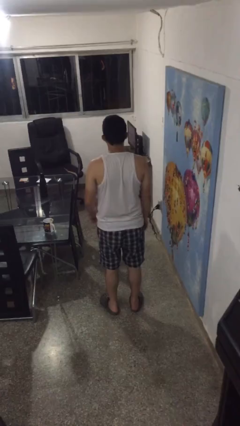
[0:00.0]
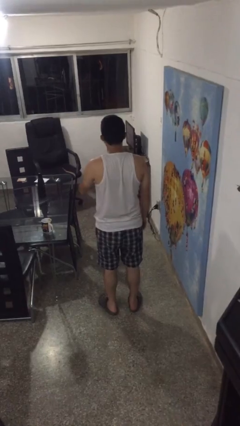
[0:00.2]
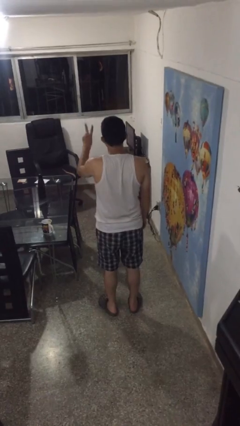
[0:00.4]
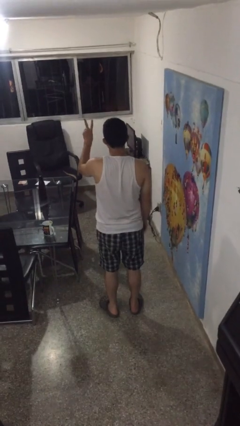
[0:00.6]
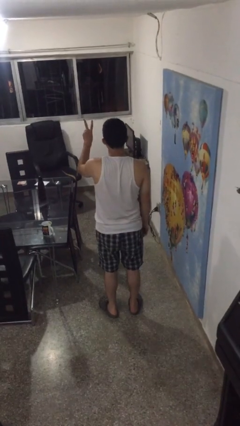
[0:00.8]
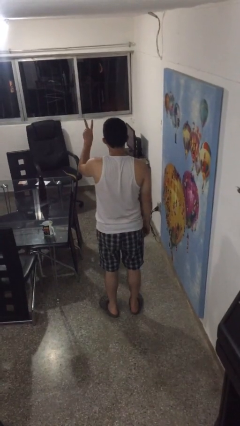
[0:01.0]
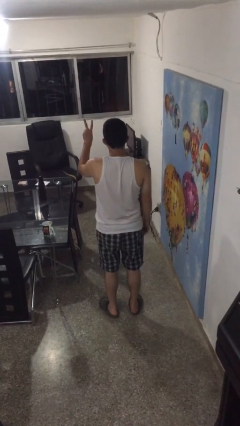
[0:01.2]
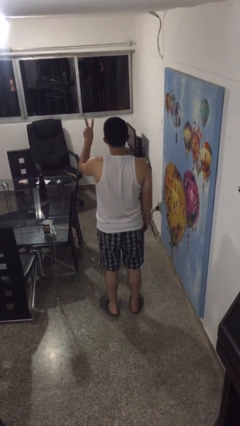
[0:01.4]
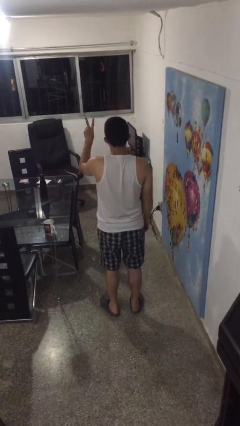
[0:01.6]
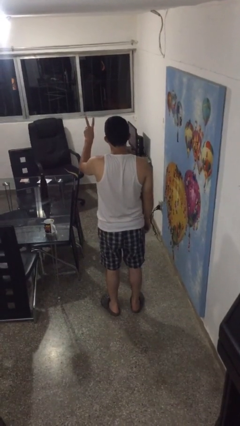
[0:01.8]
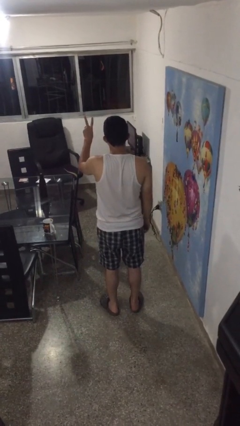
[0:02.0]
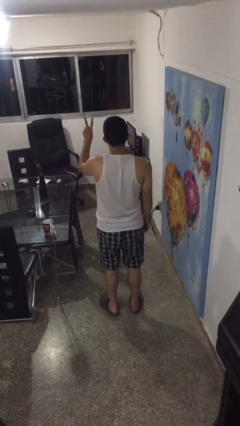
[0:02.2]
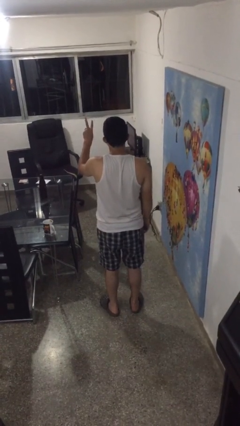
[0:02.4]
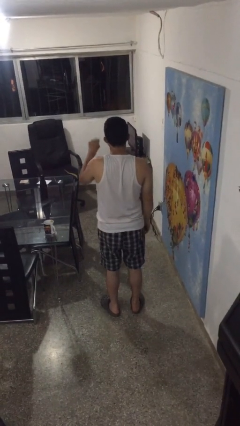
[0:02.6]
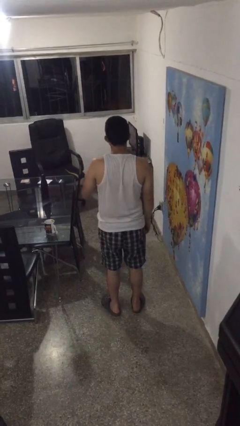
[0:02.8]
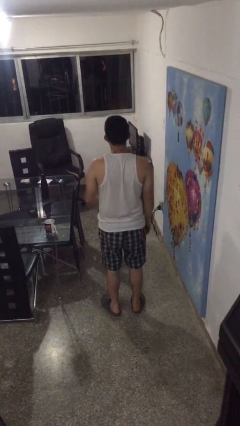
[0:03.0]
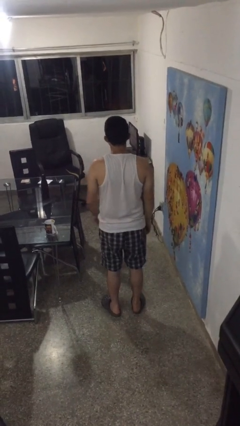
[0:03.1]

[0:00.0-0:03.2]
person gestures peace

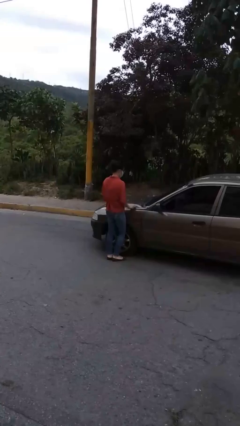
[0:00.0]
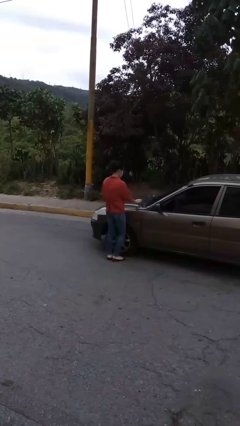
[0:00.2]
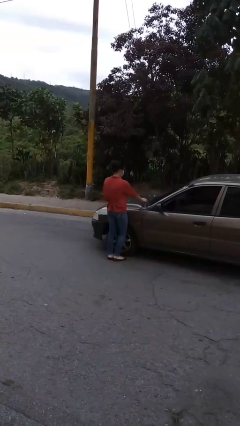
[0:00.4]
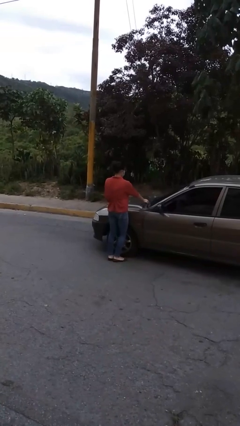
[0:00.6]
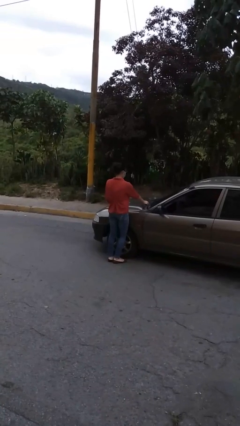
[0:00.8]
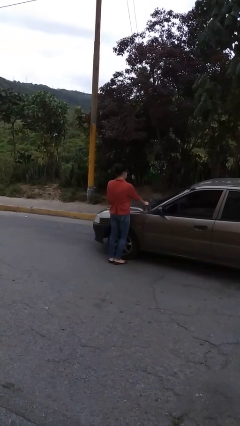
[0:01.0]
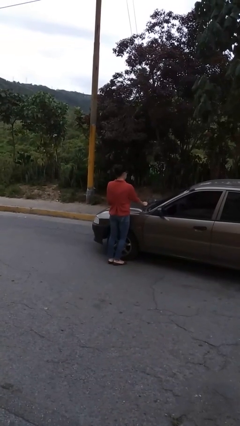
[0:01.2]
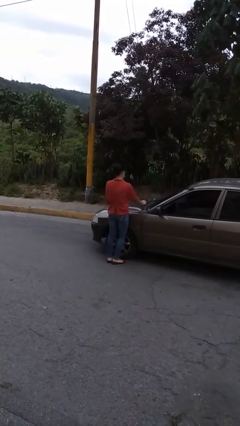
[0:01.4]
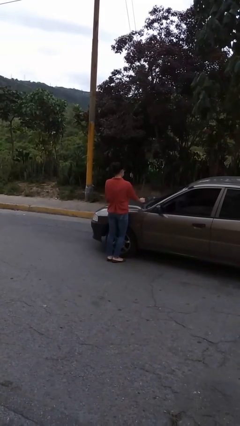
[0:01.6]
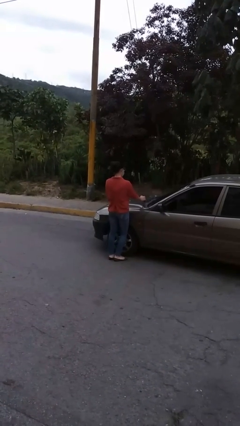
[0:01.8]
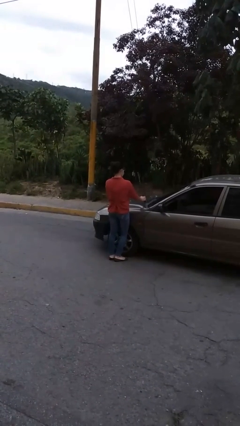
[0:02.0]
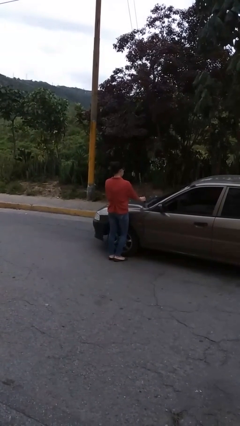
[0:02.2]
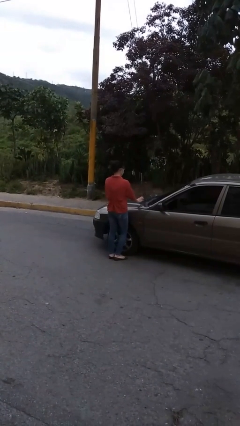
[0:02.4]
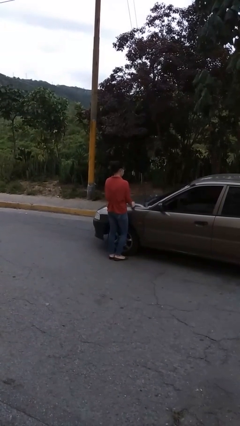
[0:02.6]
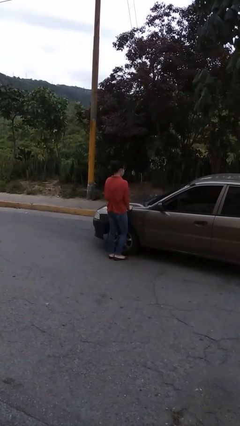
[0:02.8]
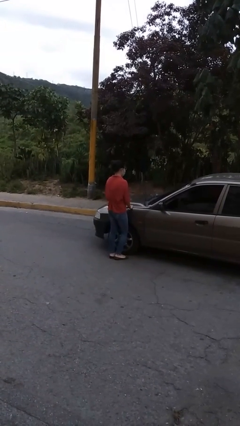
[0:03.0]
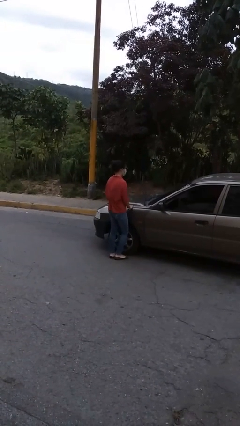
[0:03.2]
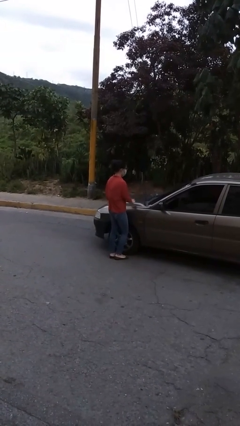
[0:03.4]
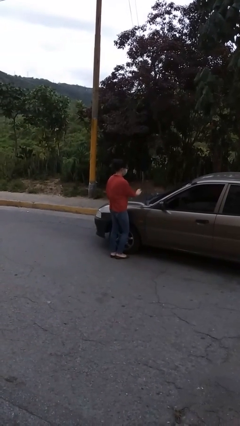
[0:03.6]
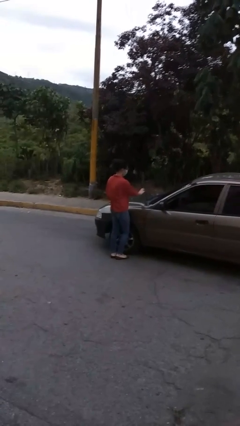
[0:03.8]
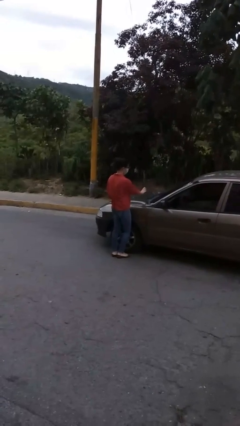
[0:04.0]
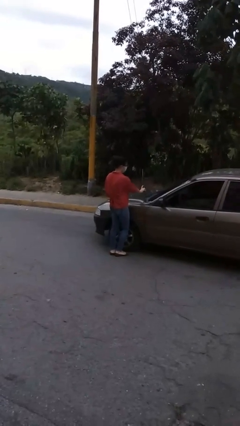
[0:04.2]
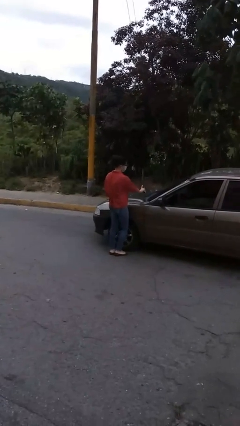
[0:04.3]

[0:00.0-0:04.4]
person flips up car wipers

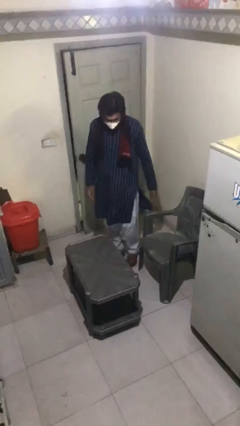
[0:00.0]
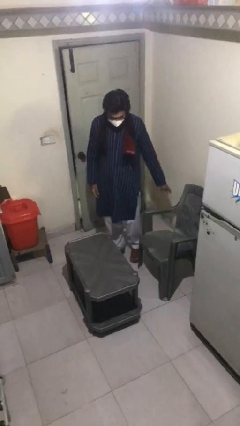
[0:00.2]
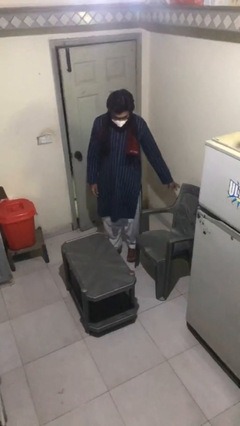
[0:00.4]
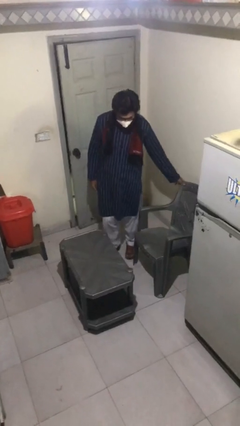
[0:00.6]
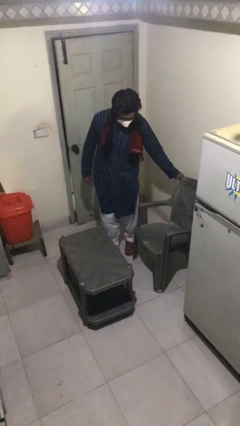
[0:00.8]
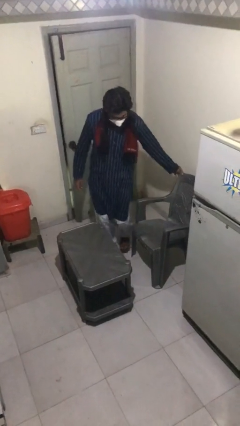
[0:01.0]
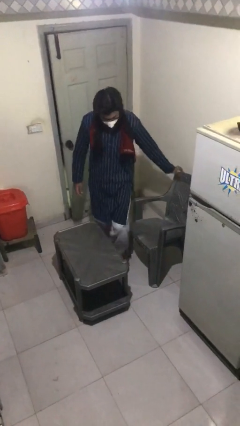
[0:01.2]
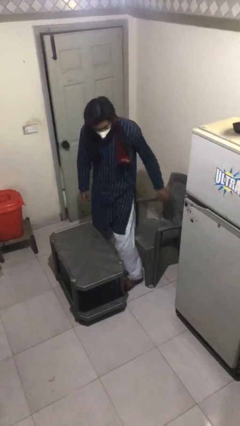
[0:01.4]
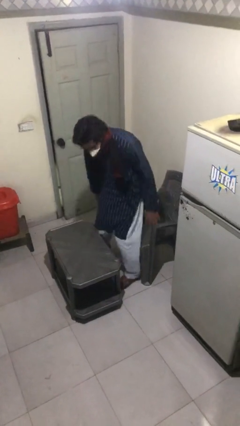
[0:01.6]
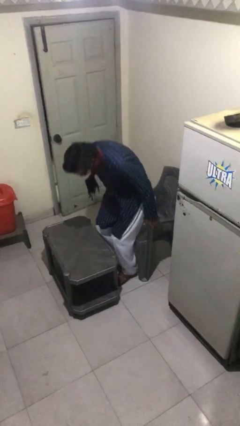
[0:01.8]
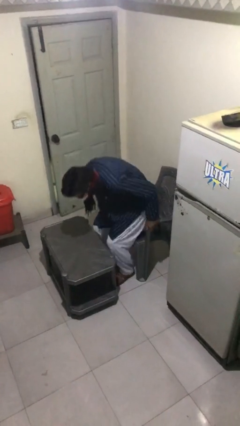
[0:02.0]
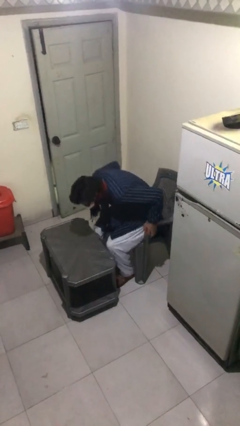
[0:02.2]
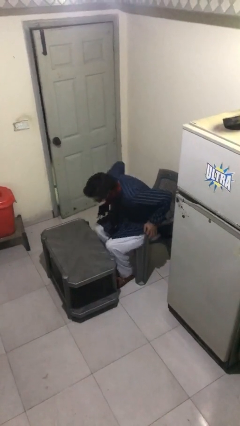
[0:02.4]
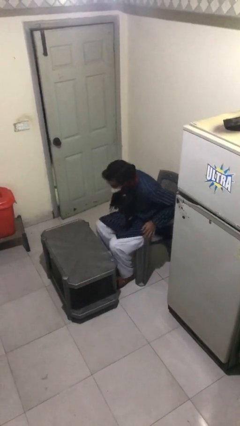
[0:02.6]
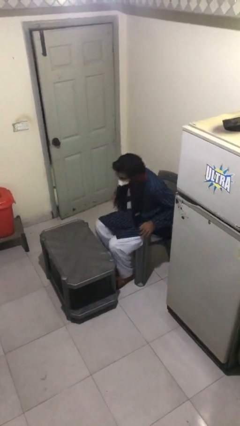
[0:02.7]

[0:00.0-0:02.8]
person sits down

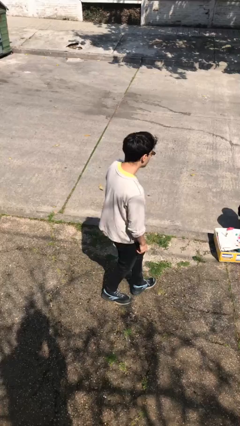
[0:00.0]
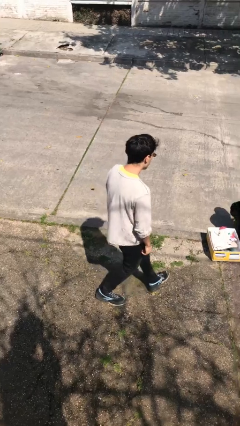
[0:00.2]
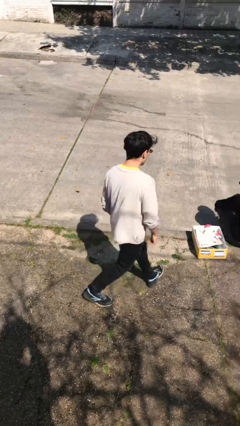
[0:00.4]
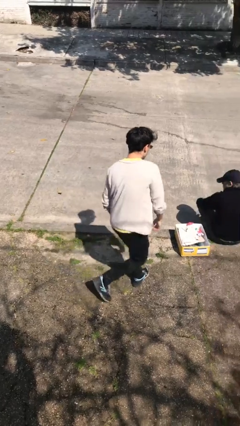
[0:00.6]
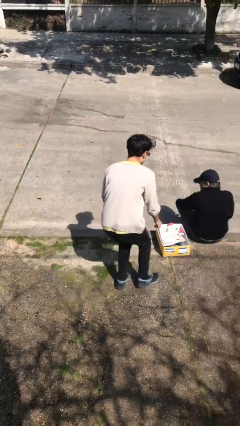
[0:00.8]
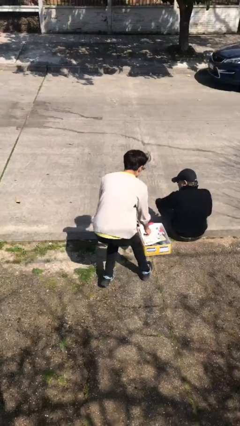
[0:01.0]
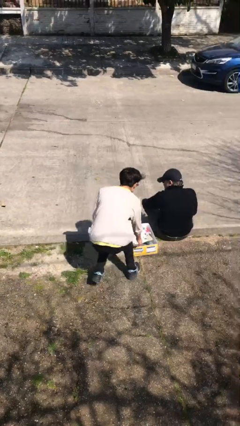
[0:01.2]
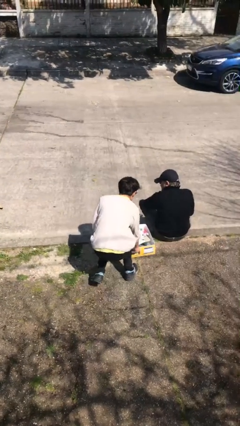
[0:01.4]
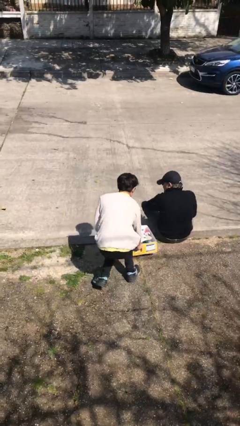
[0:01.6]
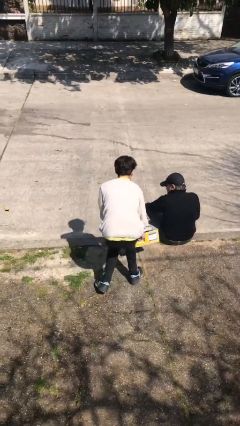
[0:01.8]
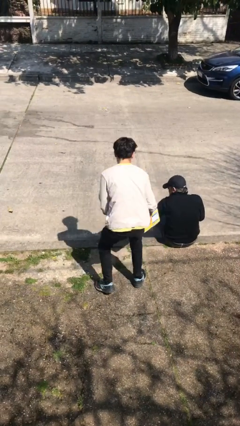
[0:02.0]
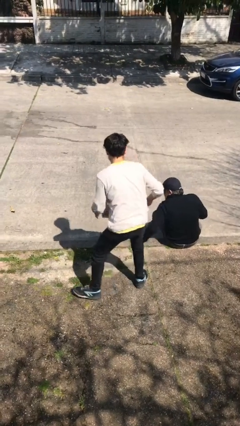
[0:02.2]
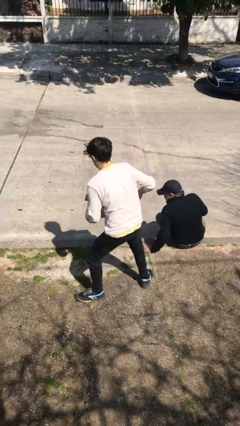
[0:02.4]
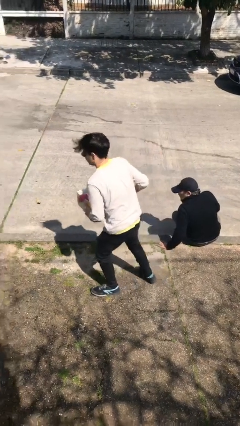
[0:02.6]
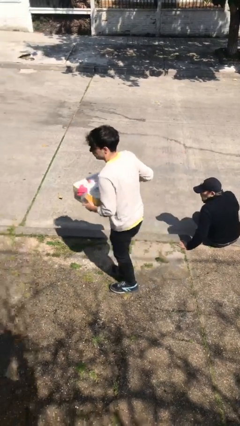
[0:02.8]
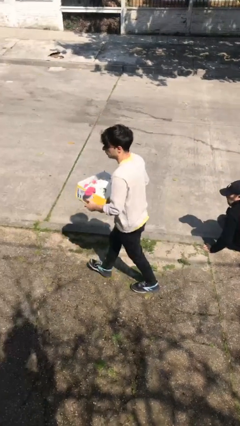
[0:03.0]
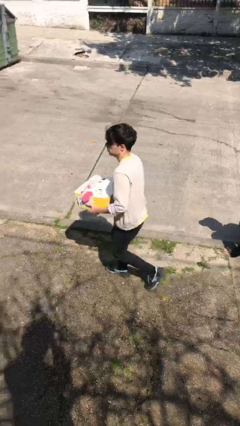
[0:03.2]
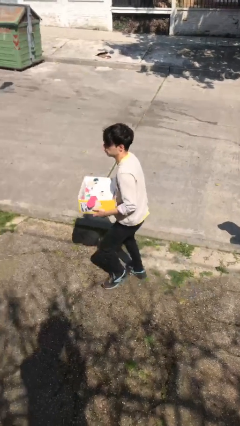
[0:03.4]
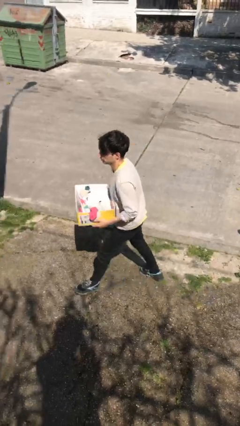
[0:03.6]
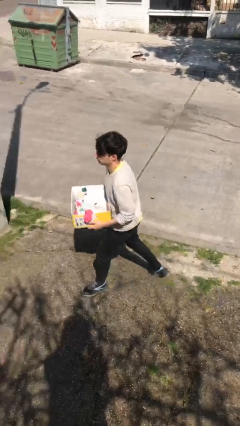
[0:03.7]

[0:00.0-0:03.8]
person steals object from person

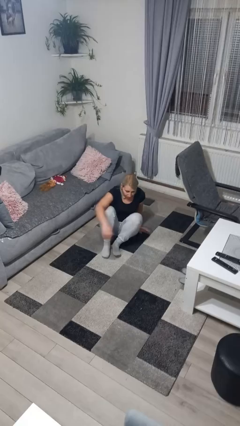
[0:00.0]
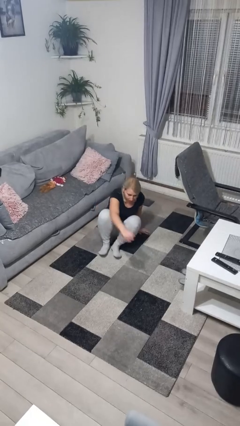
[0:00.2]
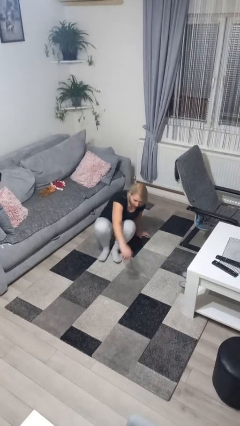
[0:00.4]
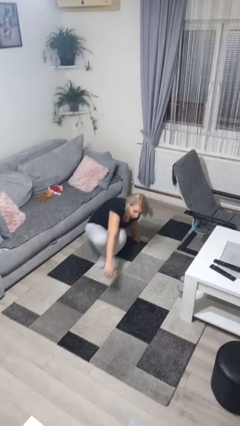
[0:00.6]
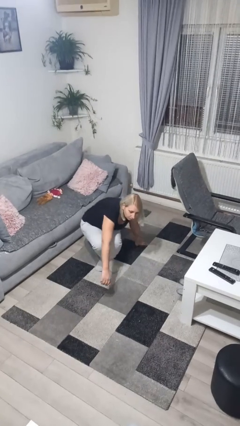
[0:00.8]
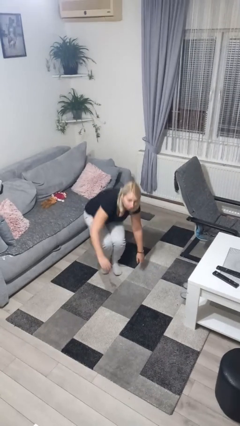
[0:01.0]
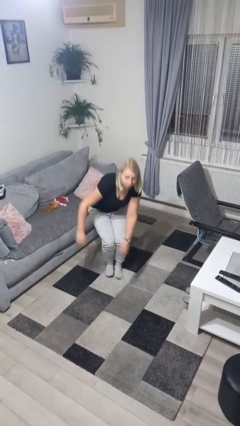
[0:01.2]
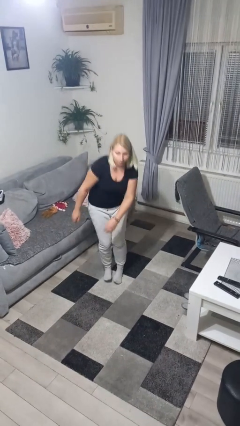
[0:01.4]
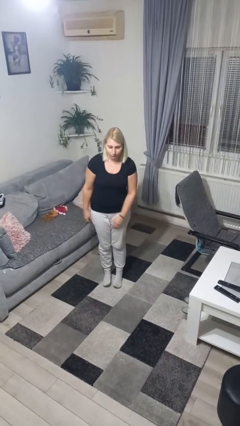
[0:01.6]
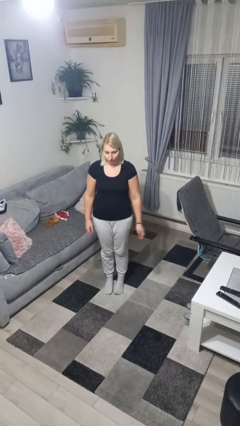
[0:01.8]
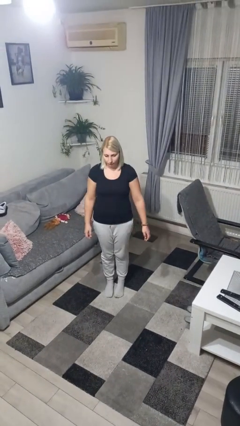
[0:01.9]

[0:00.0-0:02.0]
person stands up from floor

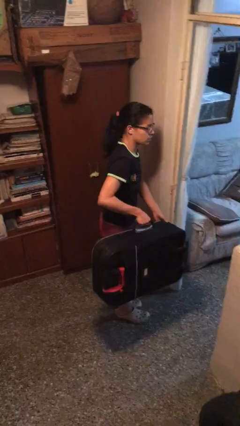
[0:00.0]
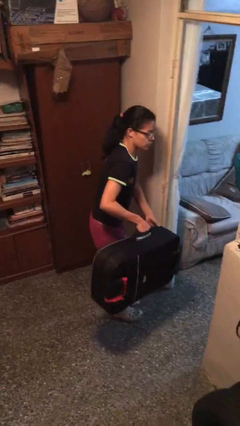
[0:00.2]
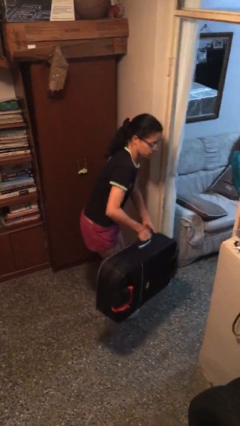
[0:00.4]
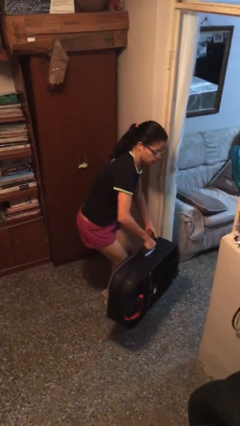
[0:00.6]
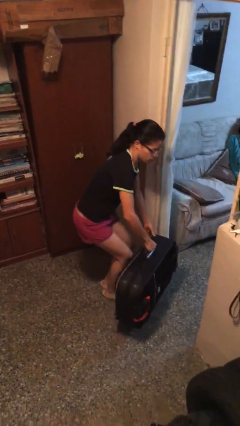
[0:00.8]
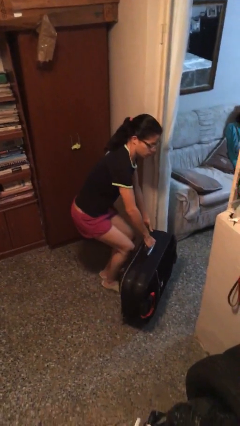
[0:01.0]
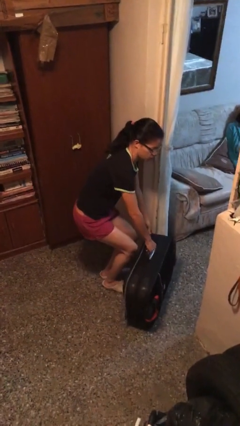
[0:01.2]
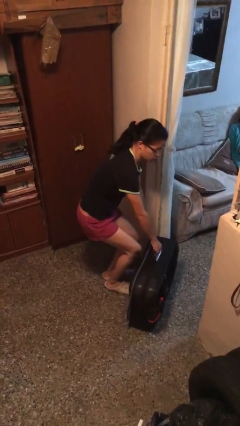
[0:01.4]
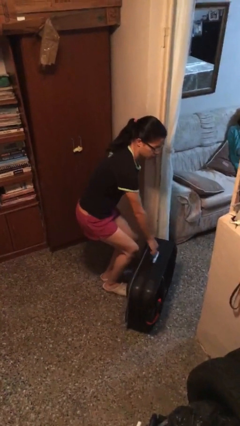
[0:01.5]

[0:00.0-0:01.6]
person puts down object on floor
